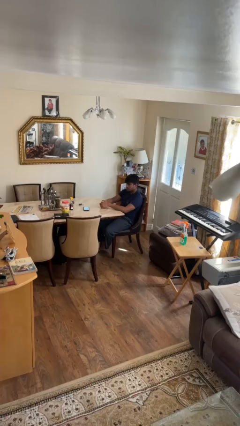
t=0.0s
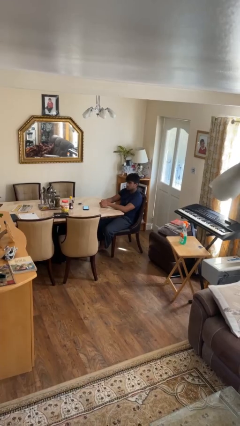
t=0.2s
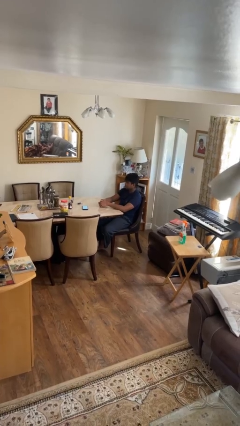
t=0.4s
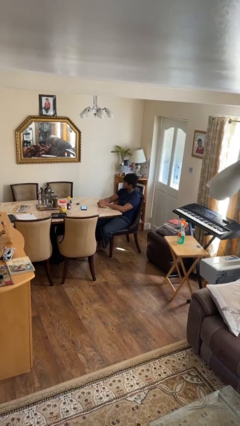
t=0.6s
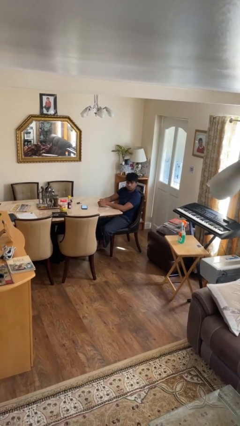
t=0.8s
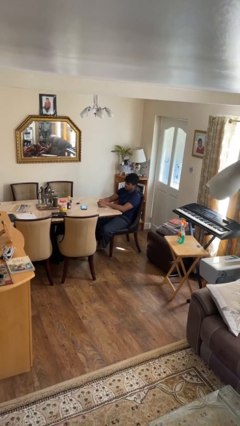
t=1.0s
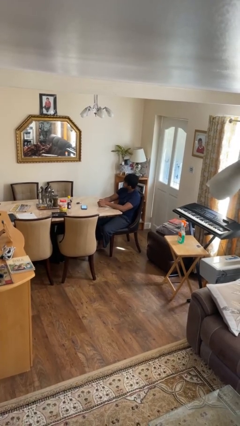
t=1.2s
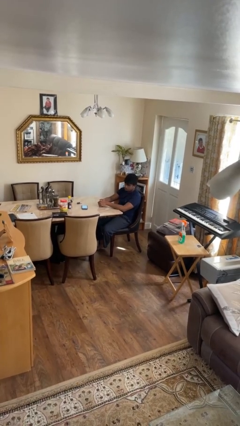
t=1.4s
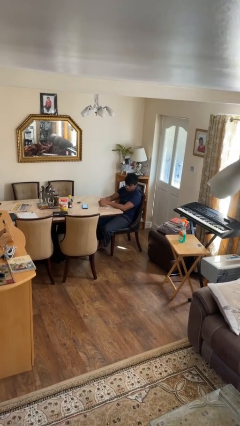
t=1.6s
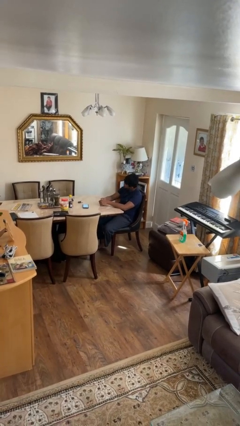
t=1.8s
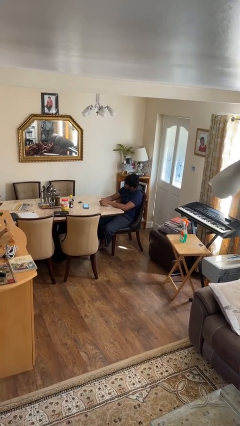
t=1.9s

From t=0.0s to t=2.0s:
person shakes head

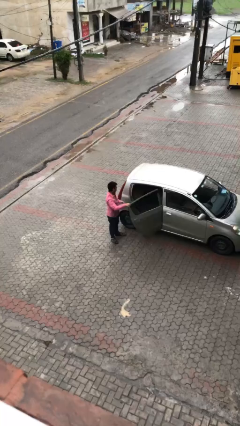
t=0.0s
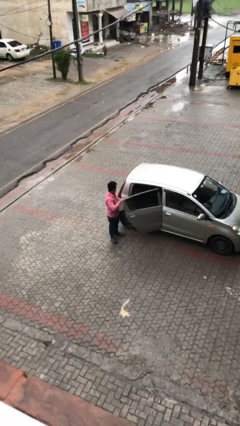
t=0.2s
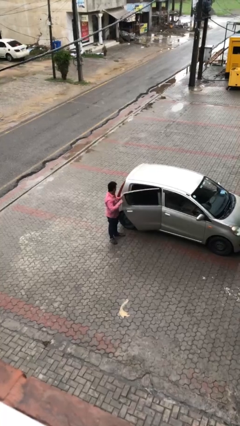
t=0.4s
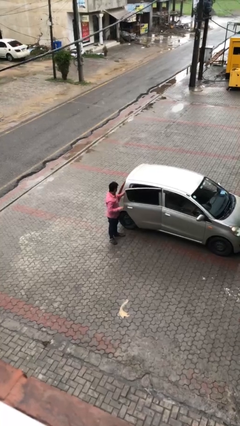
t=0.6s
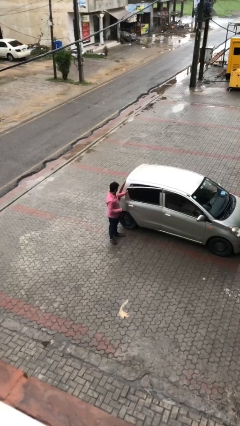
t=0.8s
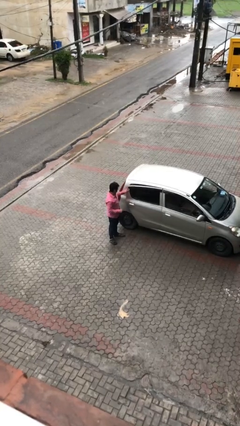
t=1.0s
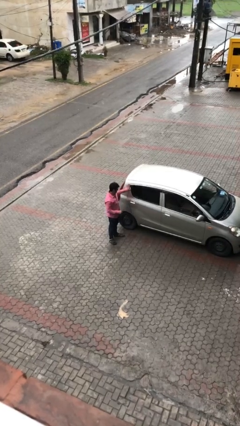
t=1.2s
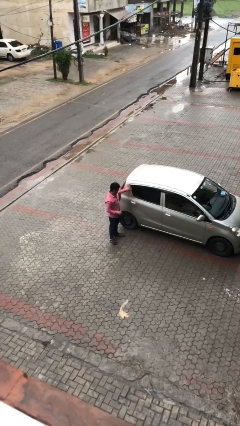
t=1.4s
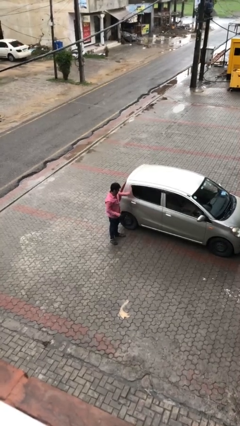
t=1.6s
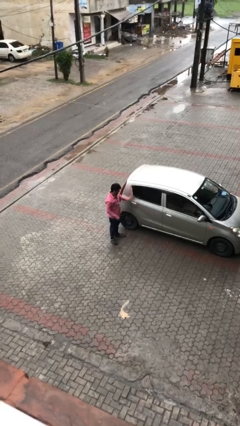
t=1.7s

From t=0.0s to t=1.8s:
person closes car door

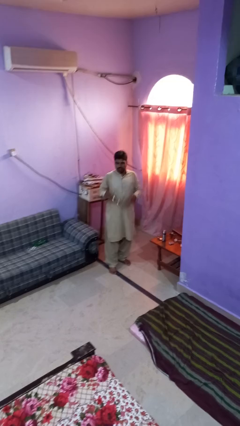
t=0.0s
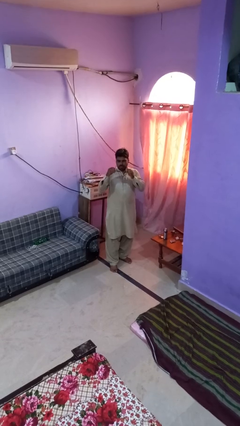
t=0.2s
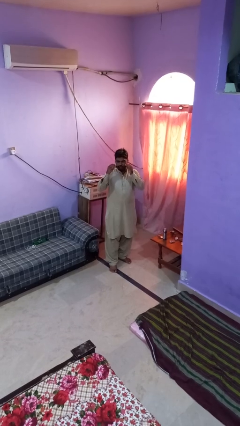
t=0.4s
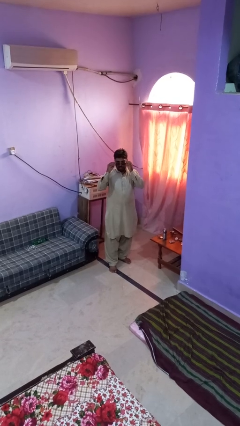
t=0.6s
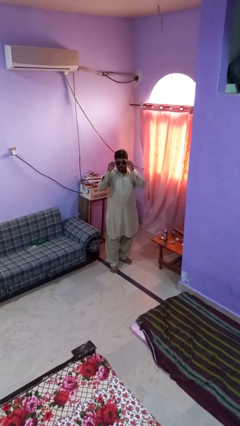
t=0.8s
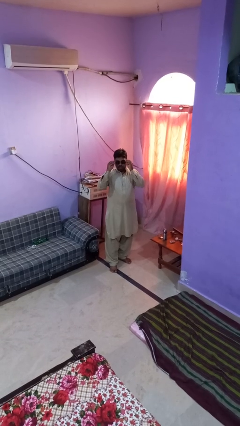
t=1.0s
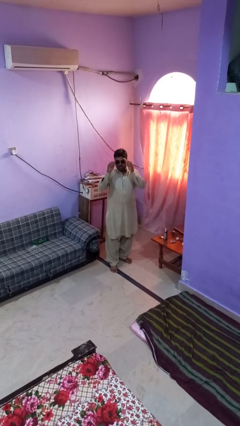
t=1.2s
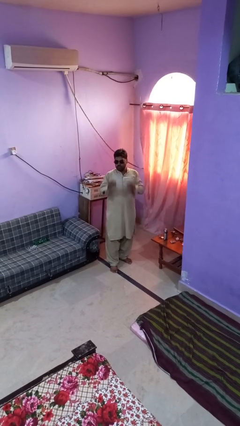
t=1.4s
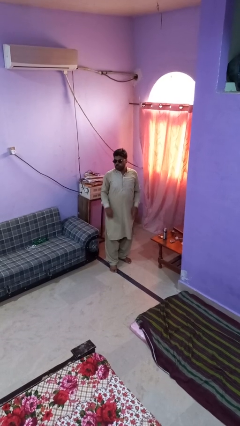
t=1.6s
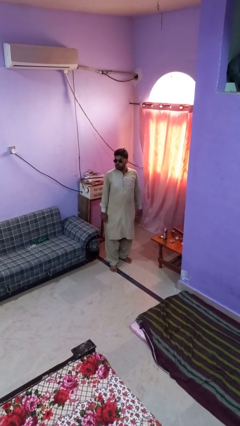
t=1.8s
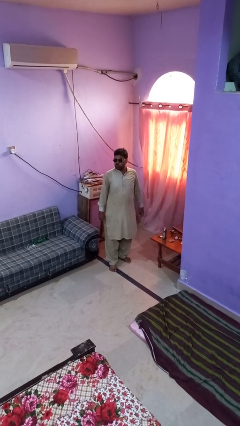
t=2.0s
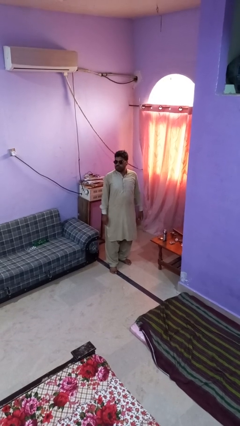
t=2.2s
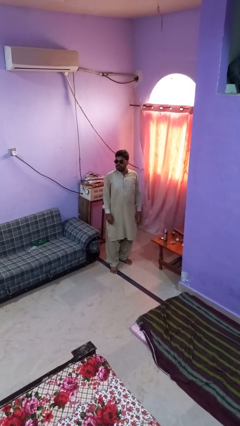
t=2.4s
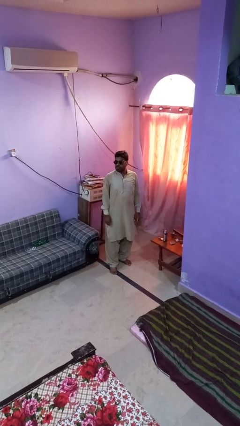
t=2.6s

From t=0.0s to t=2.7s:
person puts on sunglasses

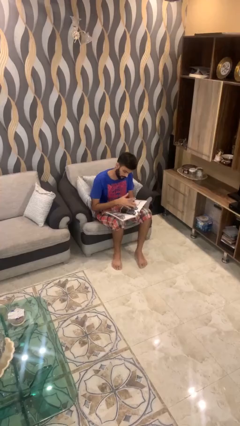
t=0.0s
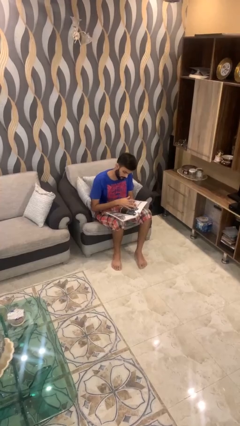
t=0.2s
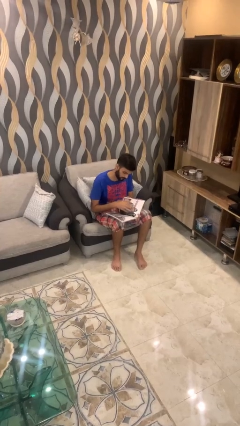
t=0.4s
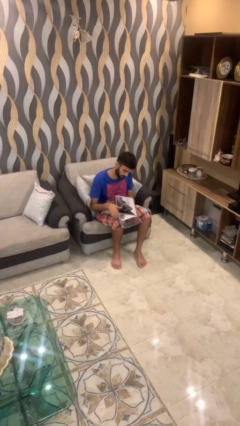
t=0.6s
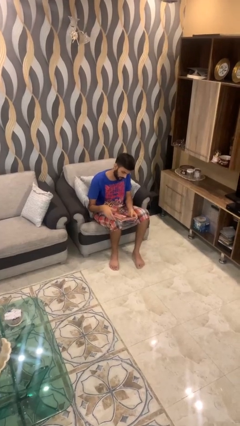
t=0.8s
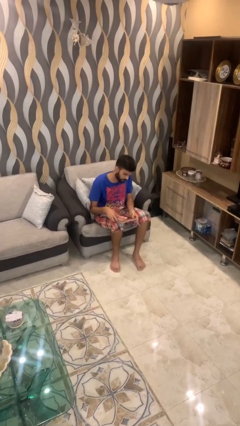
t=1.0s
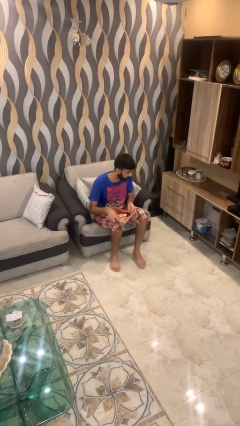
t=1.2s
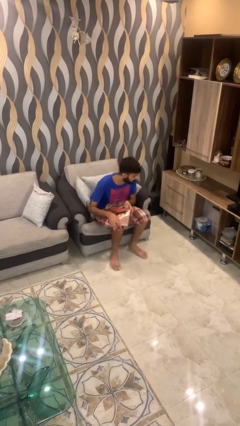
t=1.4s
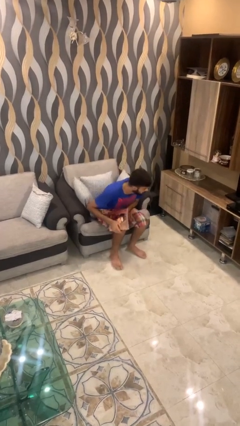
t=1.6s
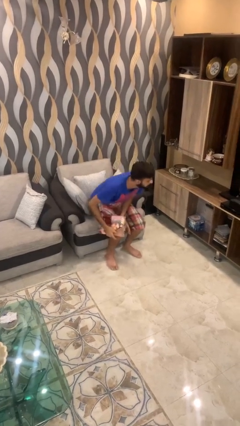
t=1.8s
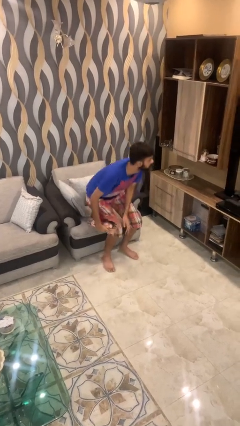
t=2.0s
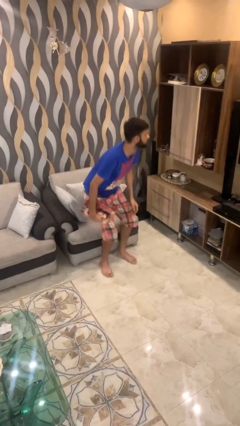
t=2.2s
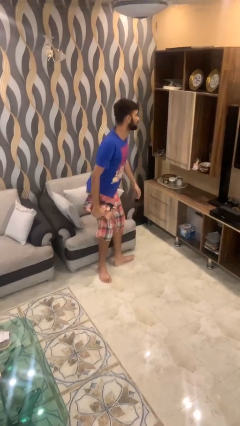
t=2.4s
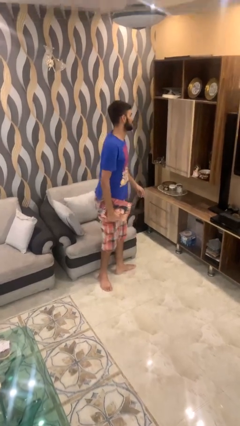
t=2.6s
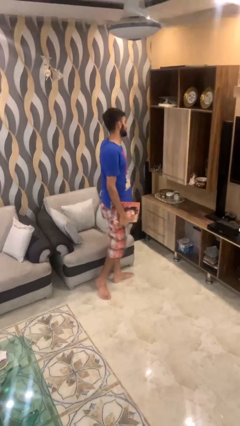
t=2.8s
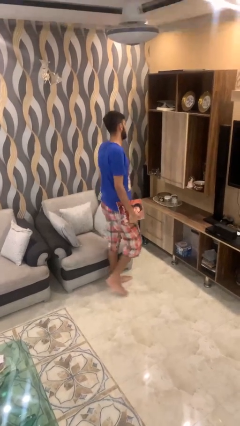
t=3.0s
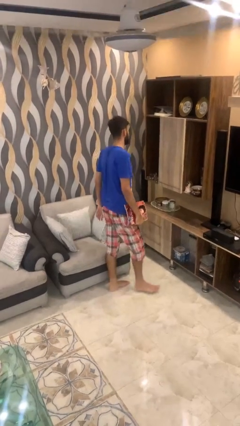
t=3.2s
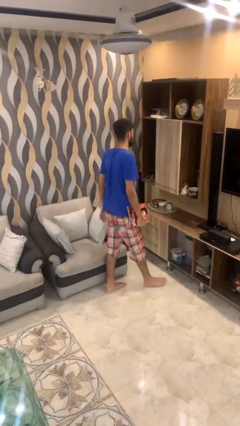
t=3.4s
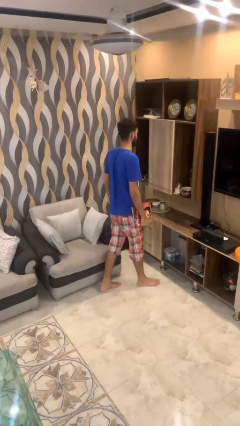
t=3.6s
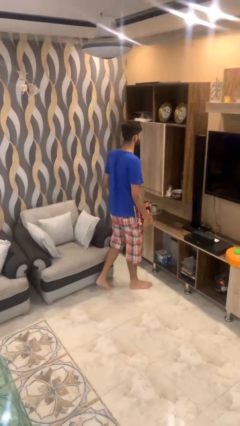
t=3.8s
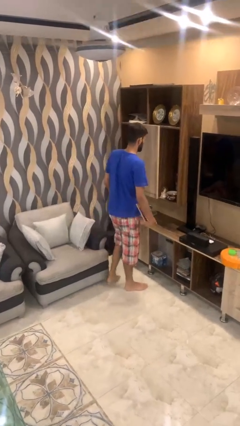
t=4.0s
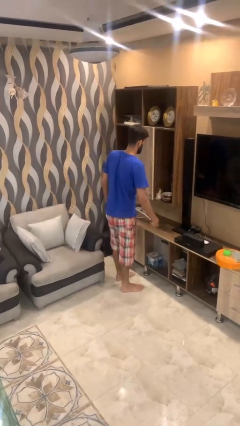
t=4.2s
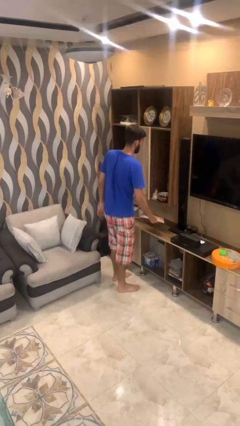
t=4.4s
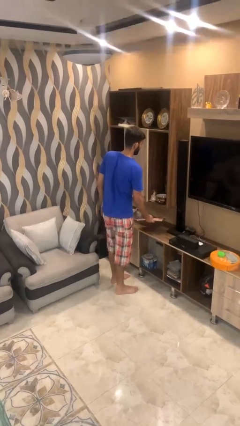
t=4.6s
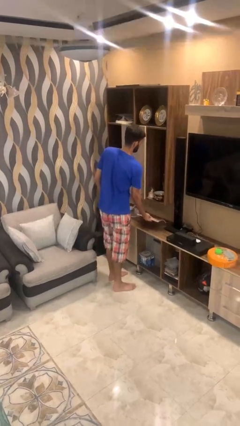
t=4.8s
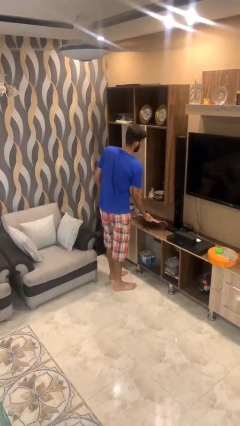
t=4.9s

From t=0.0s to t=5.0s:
person stands up

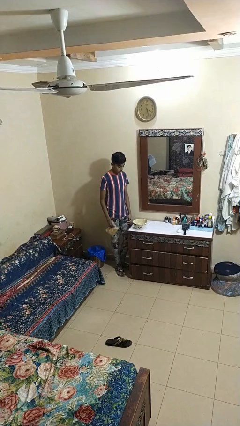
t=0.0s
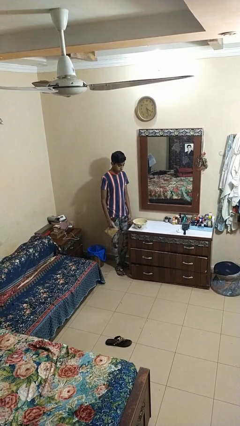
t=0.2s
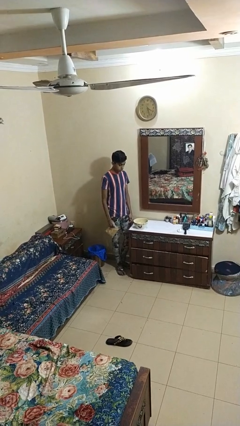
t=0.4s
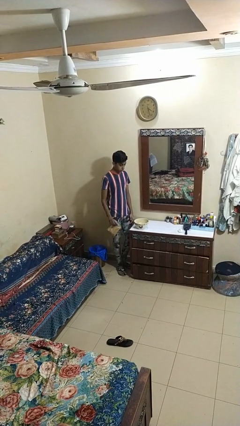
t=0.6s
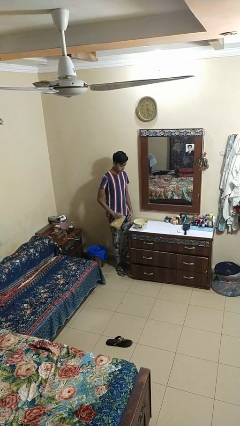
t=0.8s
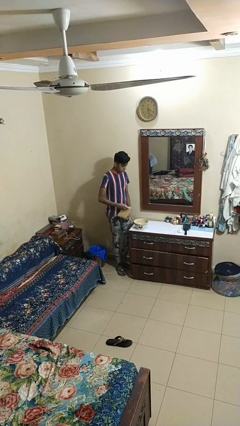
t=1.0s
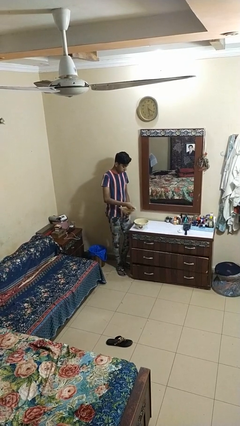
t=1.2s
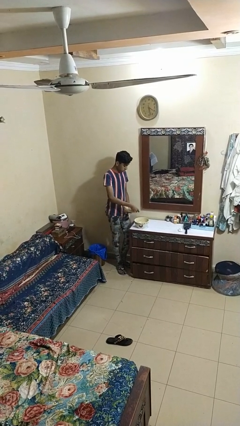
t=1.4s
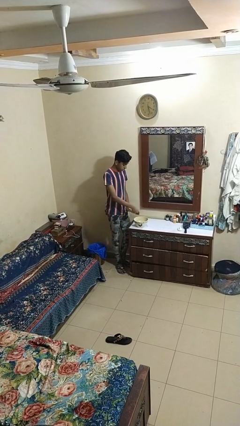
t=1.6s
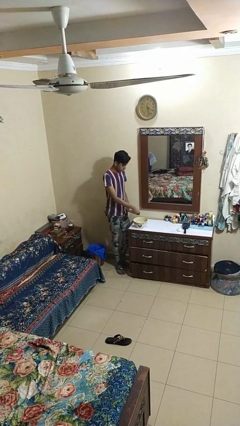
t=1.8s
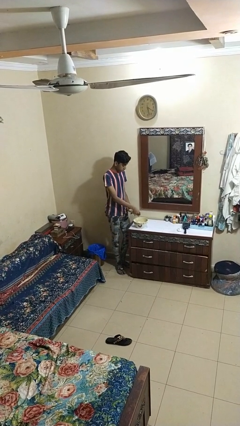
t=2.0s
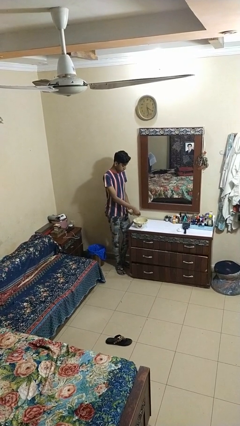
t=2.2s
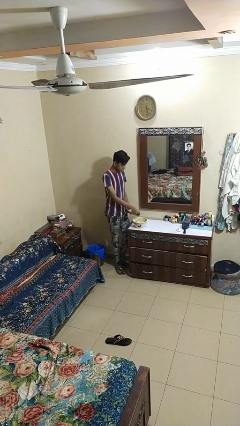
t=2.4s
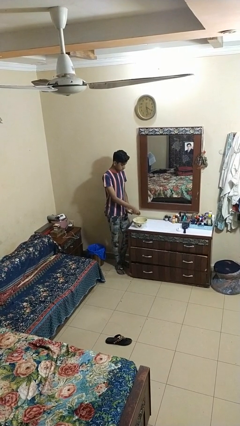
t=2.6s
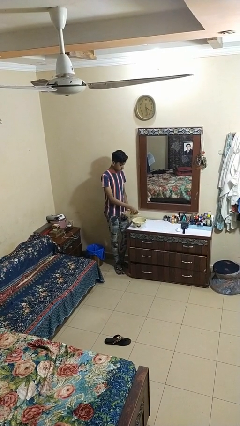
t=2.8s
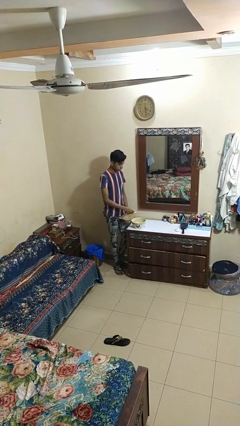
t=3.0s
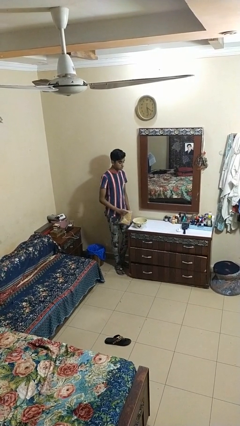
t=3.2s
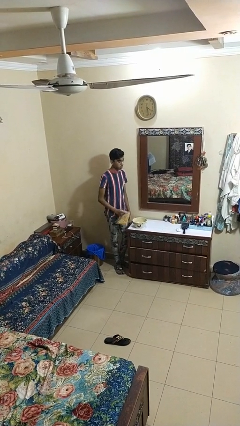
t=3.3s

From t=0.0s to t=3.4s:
person pours into bowl

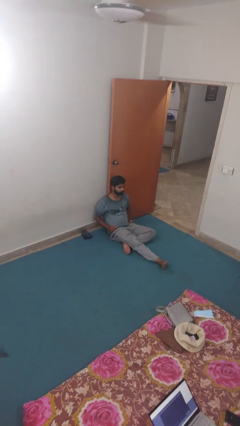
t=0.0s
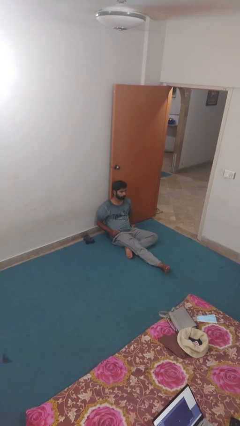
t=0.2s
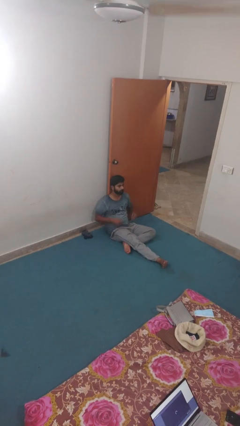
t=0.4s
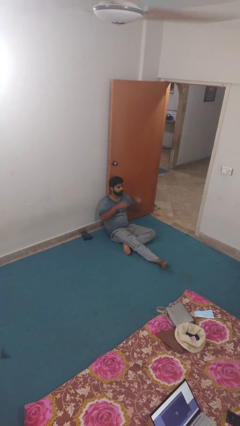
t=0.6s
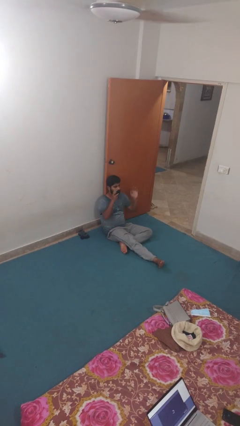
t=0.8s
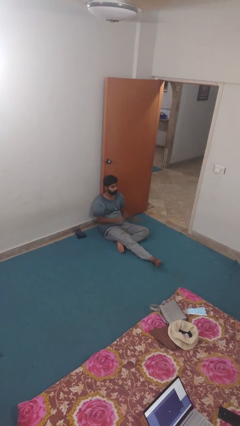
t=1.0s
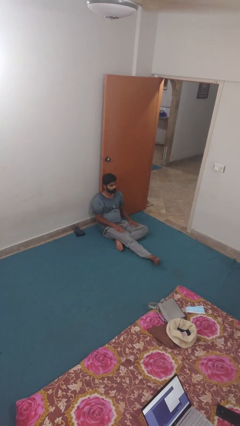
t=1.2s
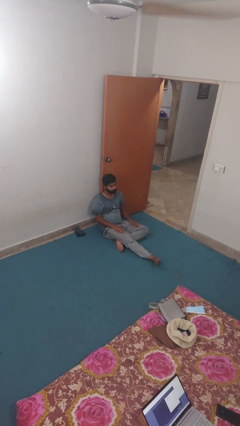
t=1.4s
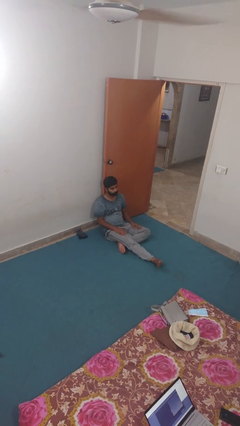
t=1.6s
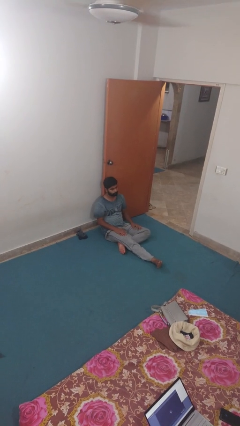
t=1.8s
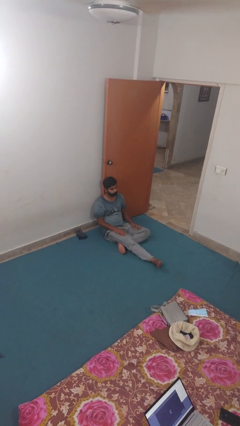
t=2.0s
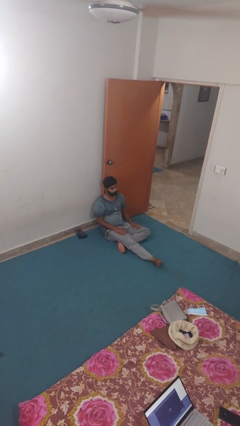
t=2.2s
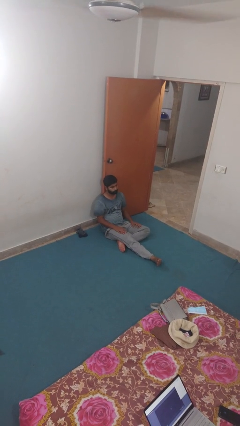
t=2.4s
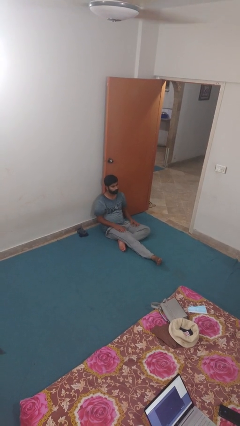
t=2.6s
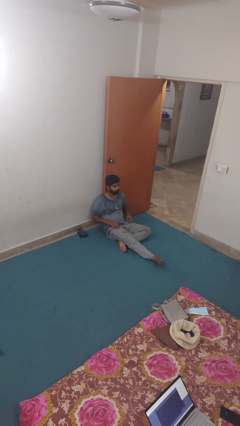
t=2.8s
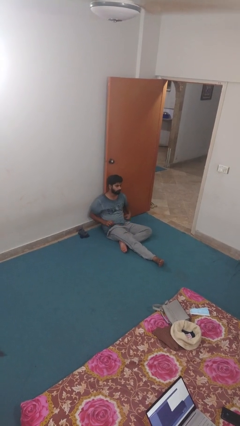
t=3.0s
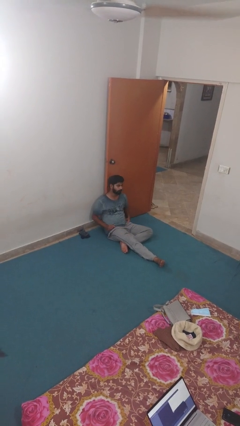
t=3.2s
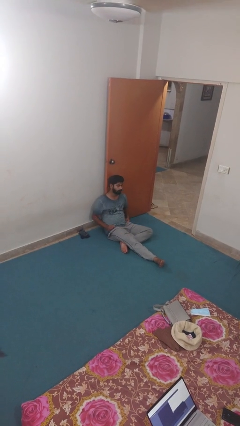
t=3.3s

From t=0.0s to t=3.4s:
person slaps hands on thighs
